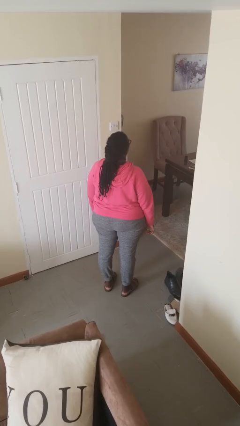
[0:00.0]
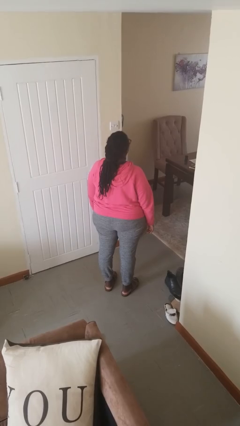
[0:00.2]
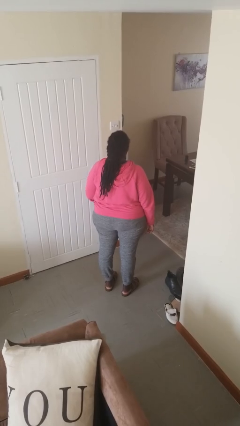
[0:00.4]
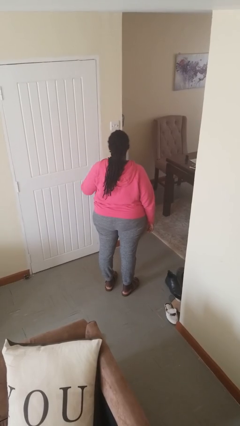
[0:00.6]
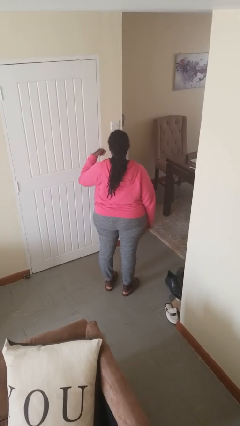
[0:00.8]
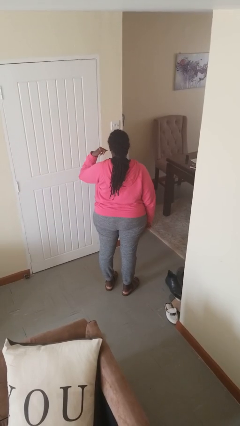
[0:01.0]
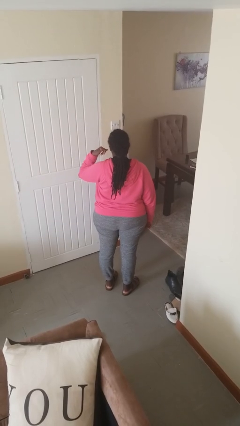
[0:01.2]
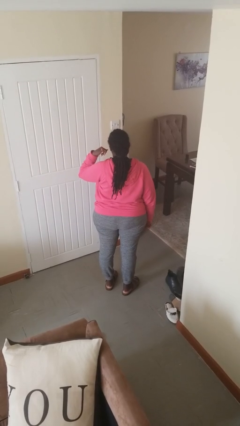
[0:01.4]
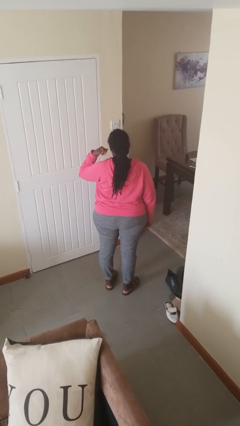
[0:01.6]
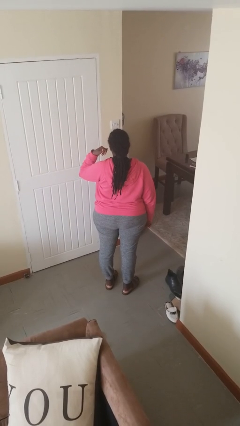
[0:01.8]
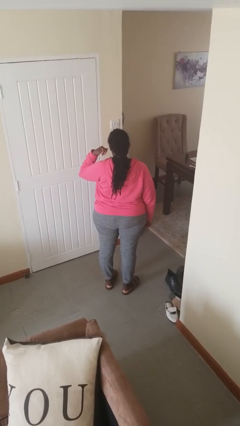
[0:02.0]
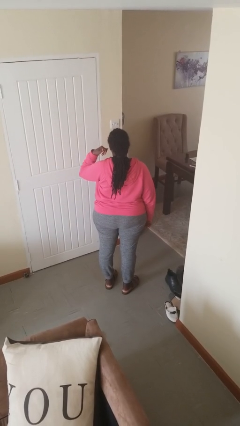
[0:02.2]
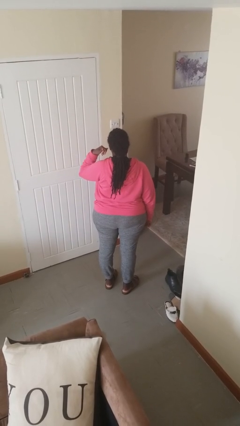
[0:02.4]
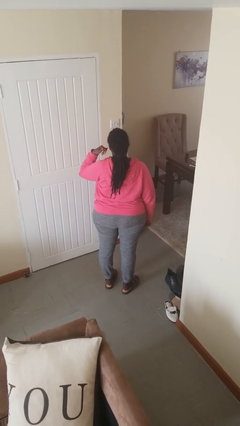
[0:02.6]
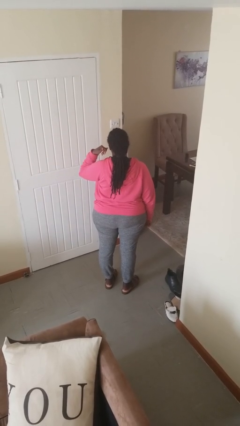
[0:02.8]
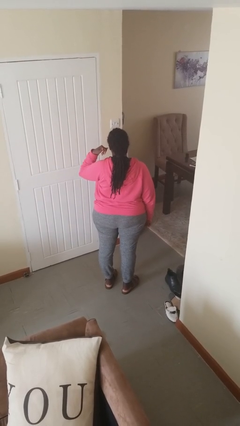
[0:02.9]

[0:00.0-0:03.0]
person gestures call me

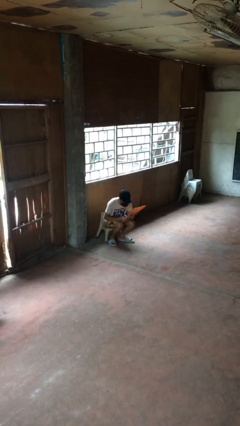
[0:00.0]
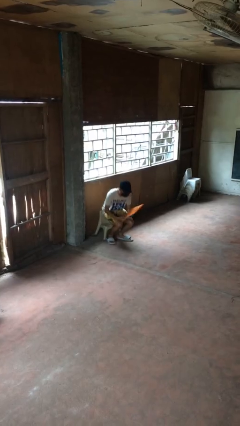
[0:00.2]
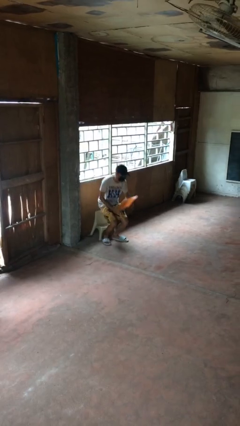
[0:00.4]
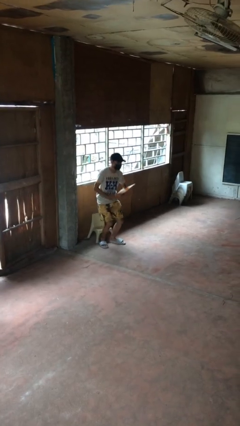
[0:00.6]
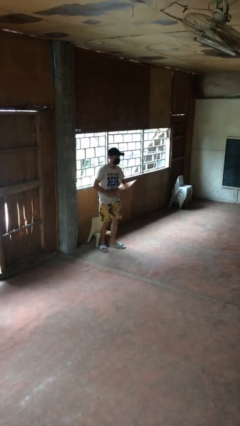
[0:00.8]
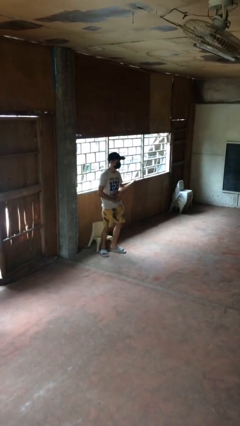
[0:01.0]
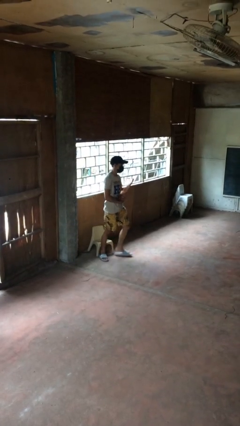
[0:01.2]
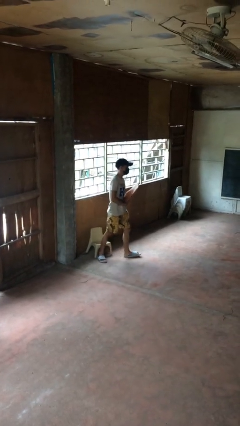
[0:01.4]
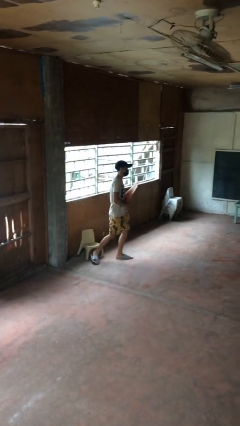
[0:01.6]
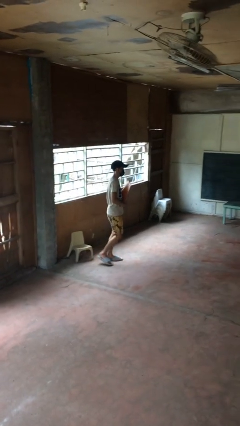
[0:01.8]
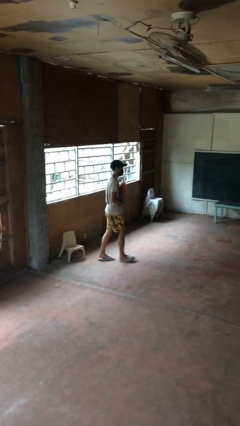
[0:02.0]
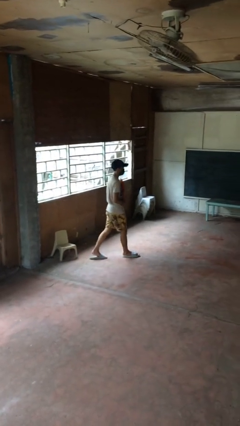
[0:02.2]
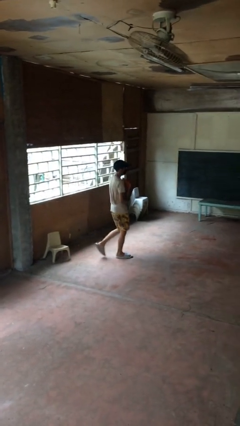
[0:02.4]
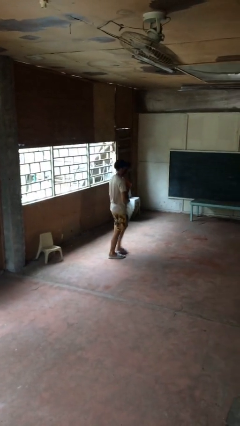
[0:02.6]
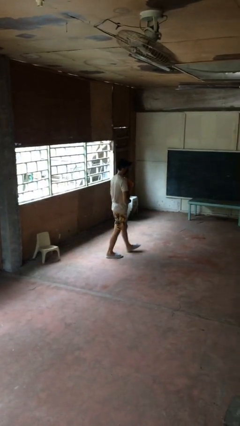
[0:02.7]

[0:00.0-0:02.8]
person stands up

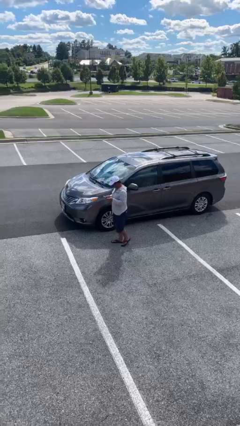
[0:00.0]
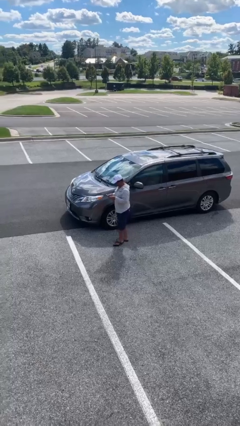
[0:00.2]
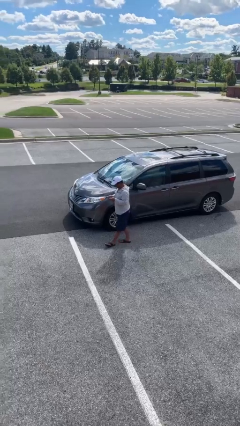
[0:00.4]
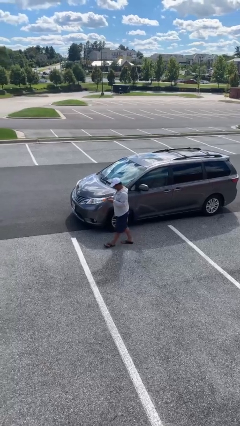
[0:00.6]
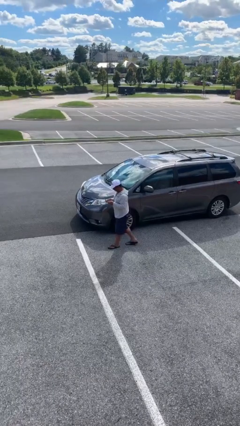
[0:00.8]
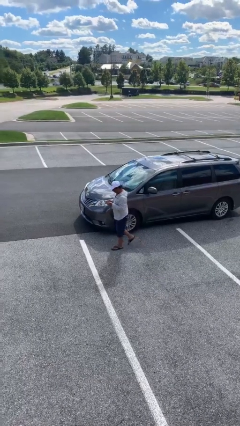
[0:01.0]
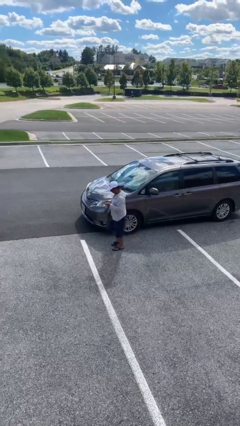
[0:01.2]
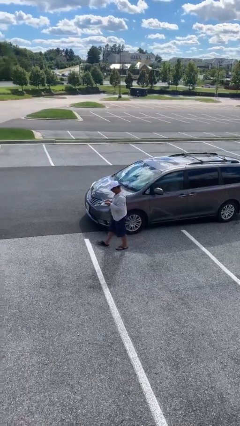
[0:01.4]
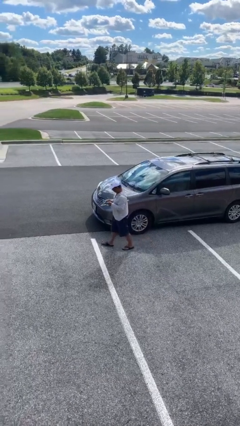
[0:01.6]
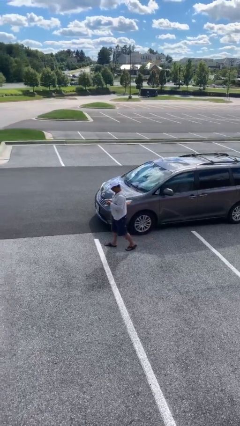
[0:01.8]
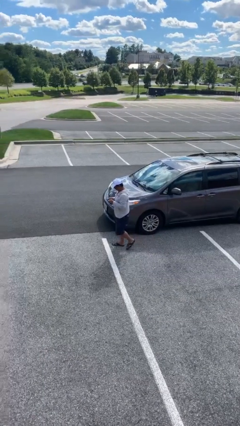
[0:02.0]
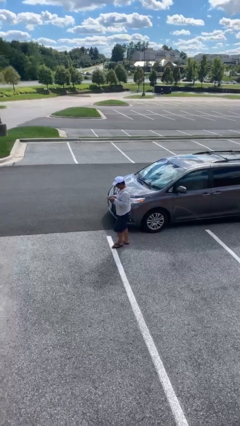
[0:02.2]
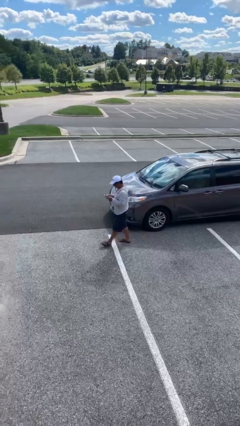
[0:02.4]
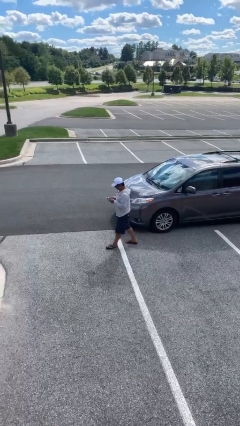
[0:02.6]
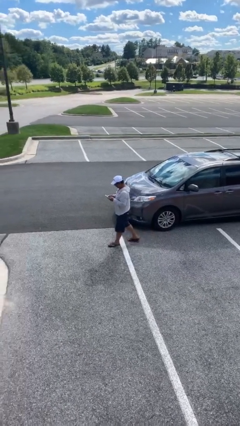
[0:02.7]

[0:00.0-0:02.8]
person texts on phone

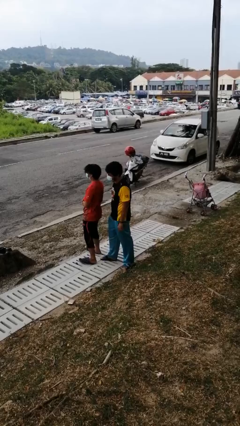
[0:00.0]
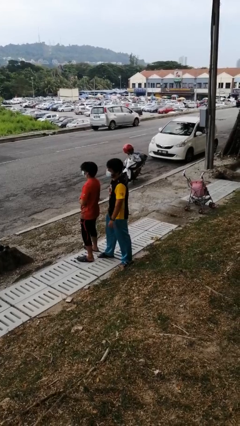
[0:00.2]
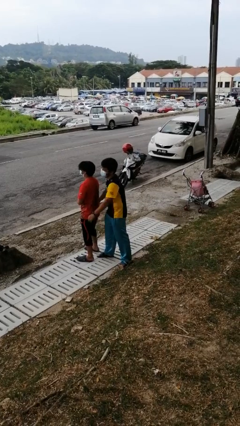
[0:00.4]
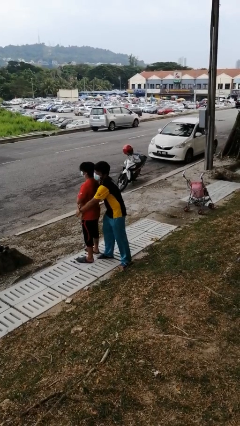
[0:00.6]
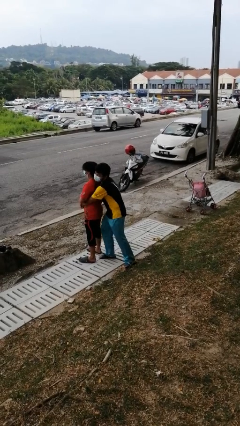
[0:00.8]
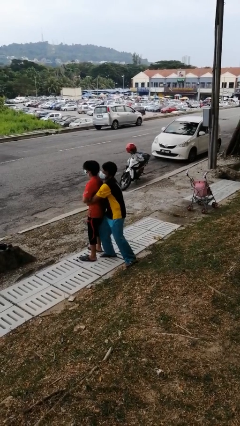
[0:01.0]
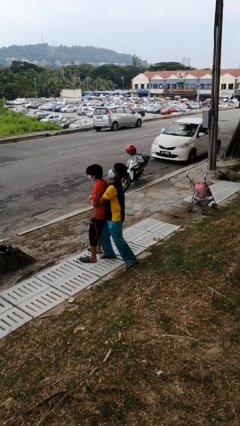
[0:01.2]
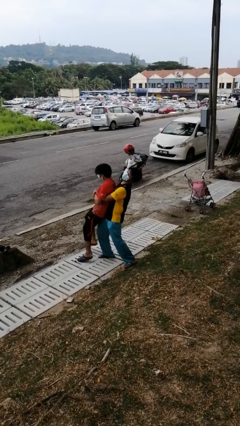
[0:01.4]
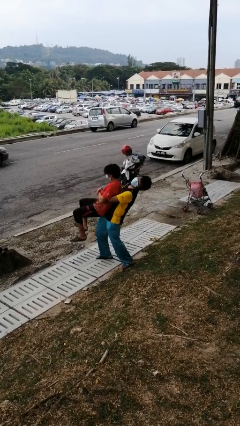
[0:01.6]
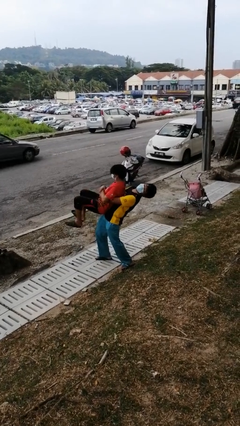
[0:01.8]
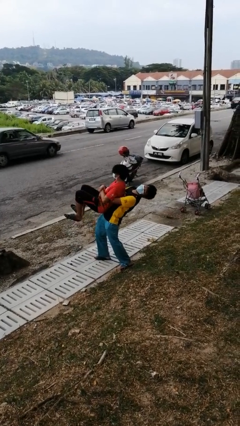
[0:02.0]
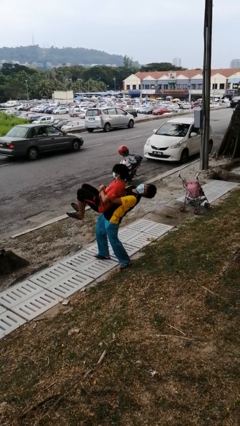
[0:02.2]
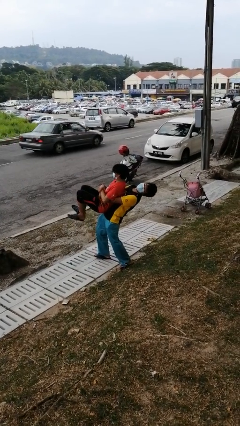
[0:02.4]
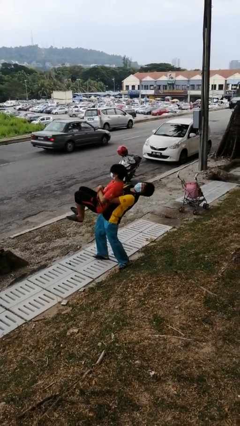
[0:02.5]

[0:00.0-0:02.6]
person picks up person

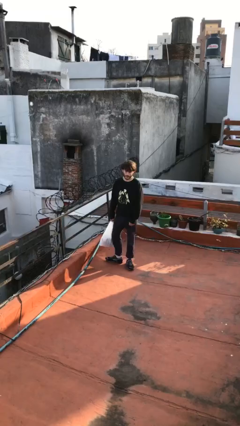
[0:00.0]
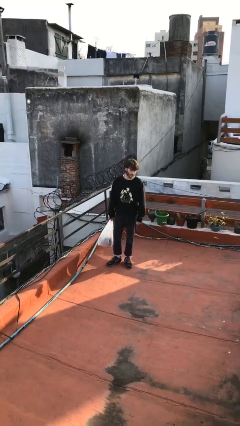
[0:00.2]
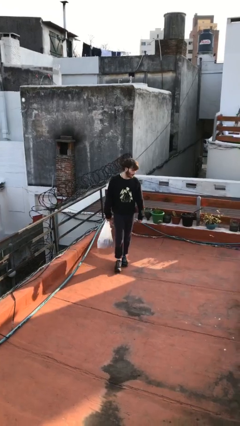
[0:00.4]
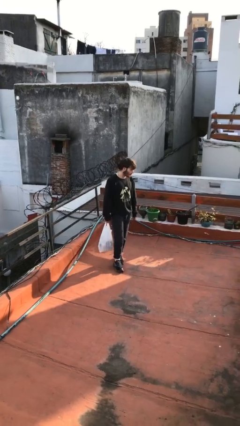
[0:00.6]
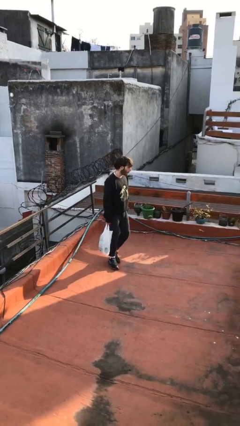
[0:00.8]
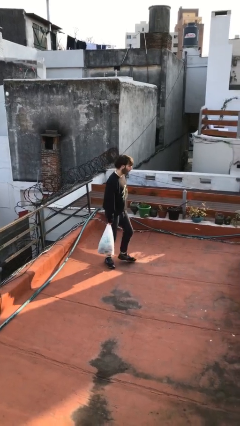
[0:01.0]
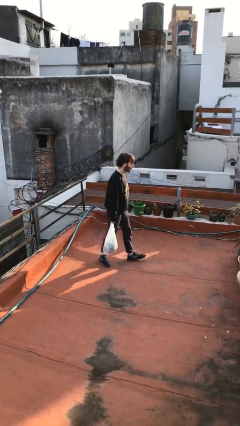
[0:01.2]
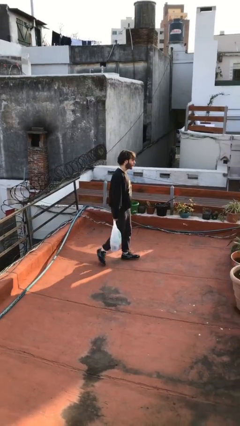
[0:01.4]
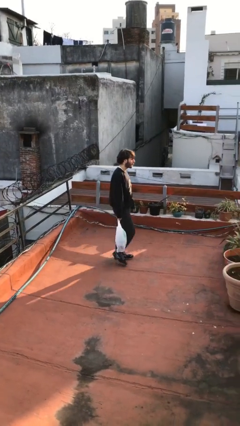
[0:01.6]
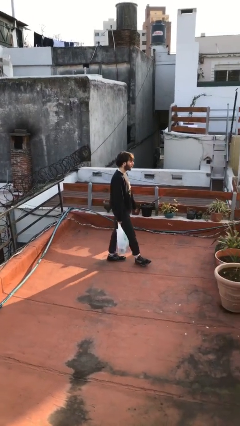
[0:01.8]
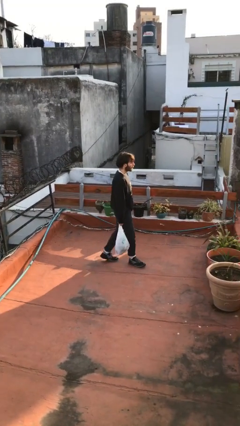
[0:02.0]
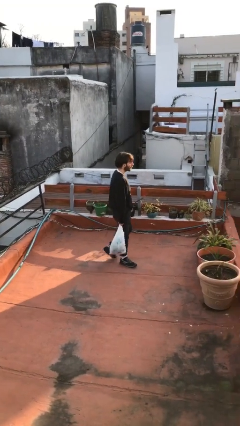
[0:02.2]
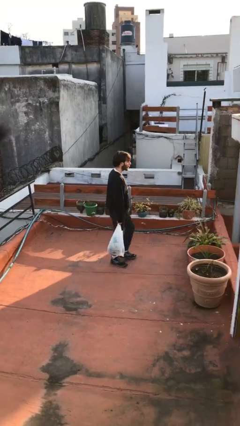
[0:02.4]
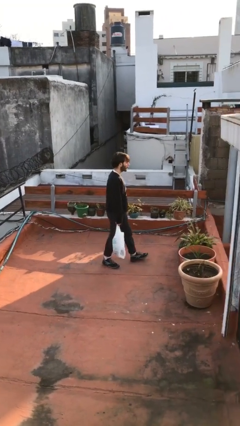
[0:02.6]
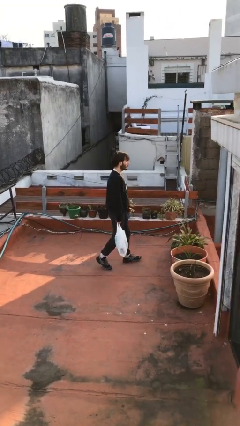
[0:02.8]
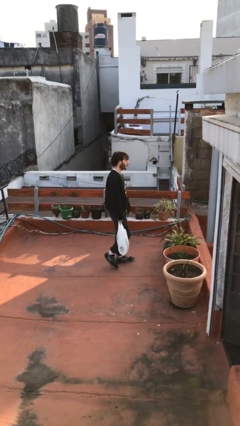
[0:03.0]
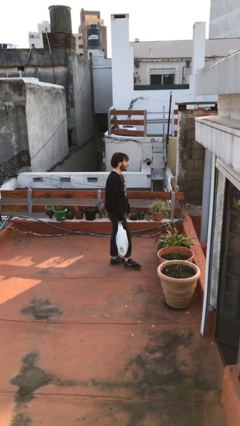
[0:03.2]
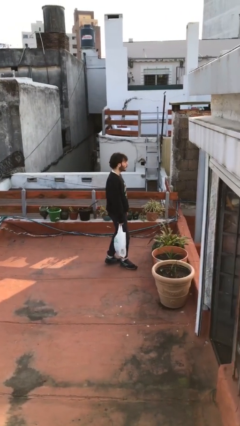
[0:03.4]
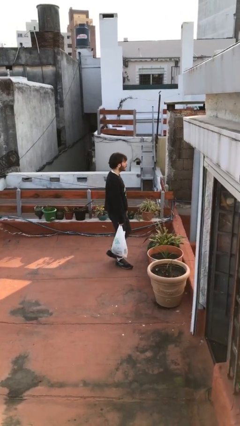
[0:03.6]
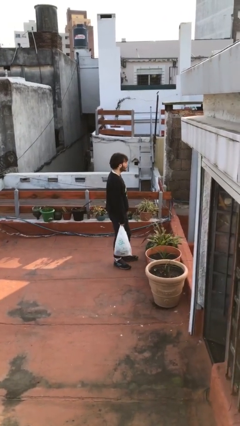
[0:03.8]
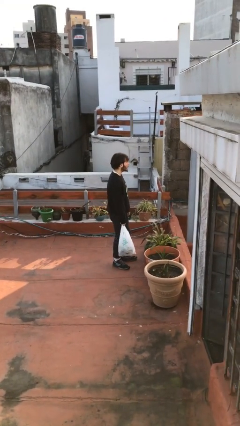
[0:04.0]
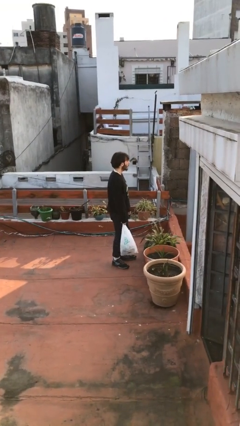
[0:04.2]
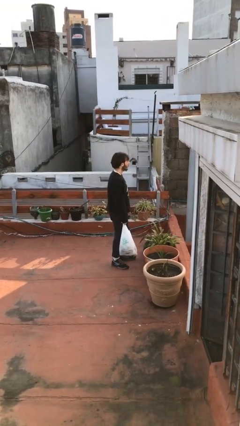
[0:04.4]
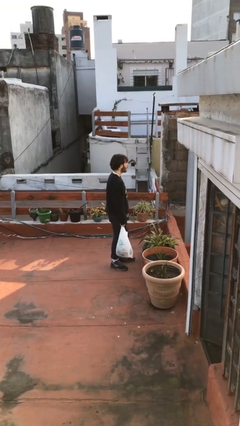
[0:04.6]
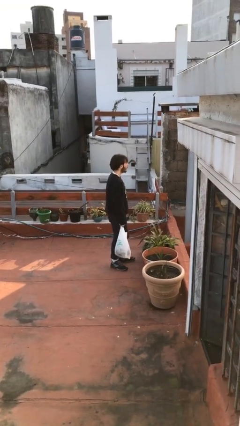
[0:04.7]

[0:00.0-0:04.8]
person carries groceries

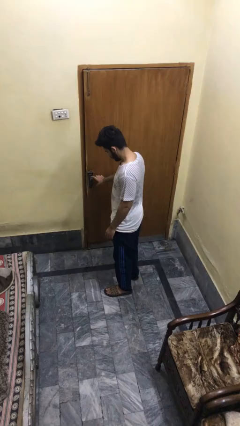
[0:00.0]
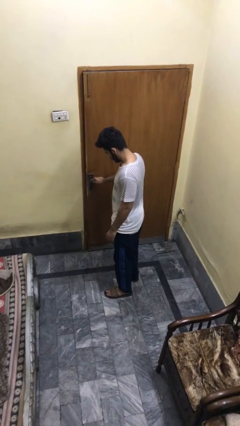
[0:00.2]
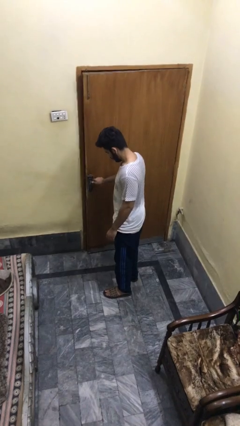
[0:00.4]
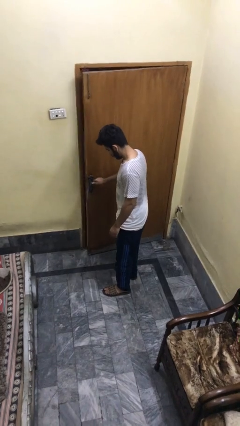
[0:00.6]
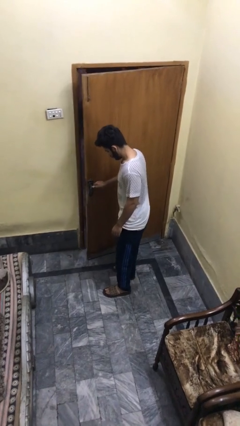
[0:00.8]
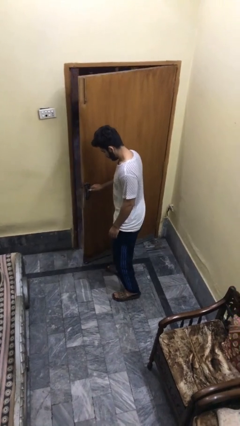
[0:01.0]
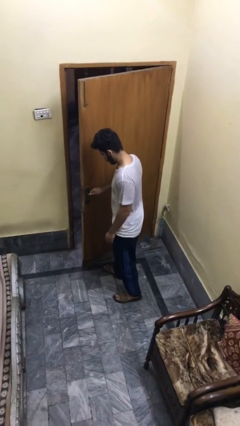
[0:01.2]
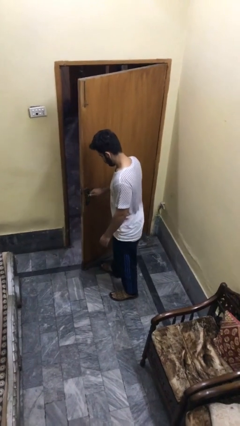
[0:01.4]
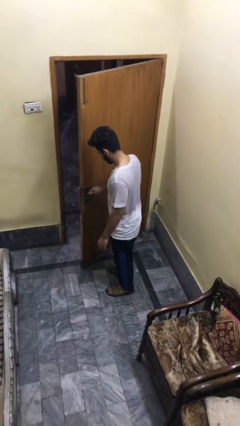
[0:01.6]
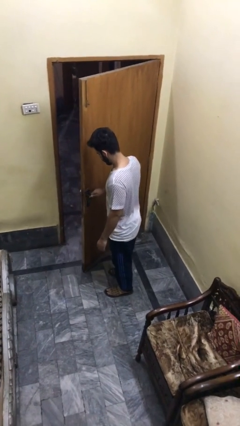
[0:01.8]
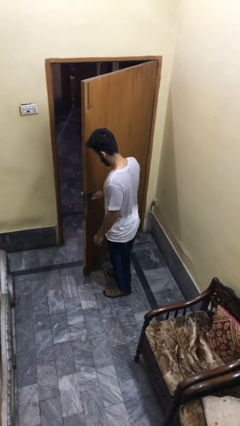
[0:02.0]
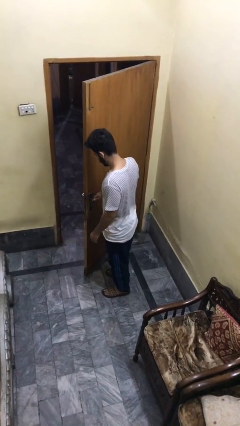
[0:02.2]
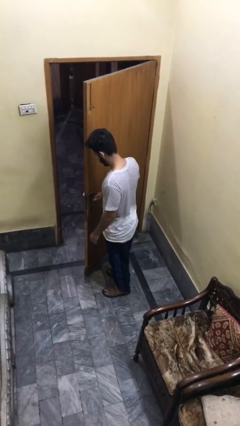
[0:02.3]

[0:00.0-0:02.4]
person opens facility door
